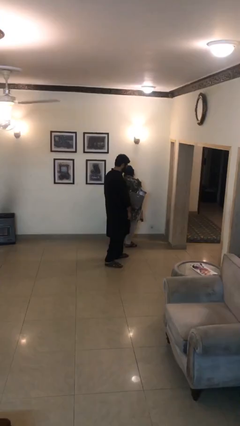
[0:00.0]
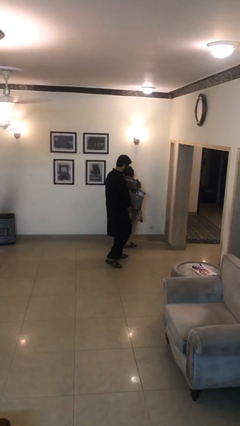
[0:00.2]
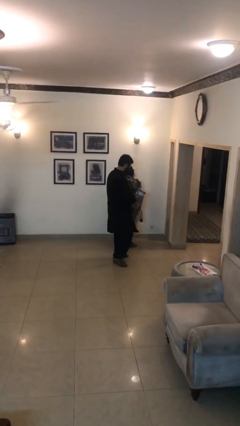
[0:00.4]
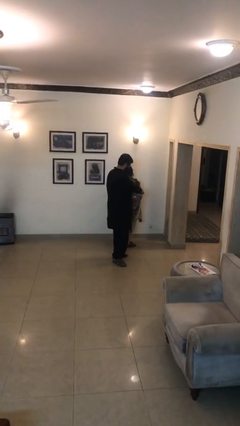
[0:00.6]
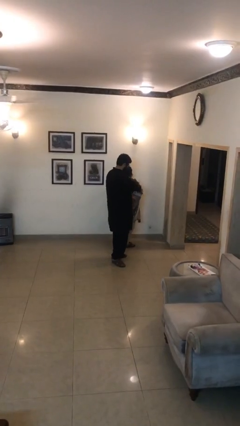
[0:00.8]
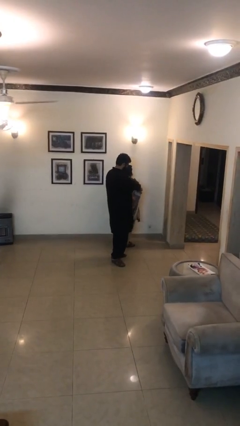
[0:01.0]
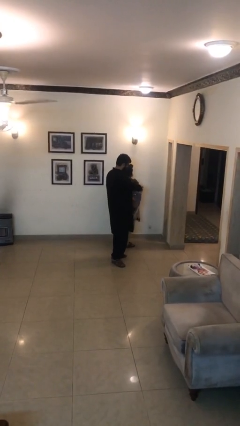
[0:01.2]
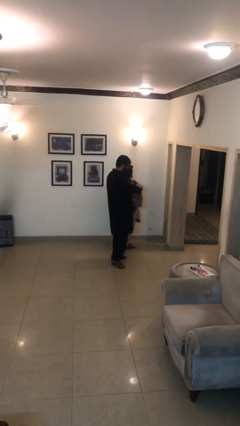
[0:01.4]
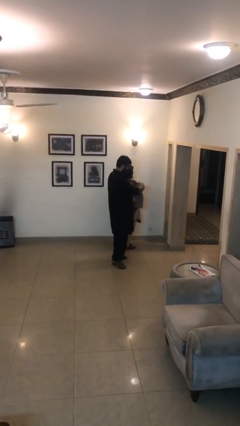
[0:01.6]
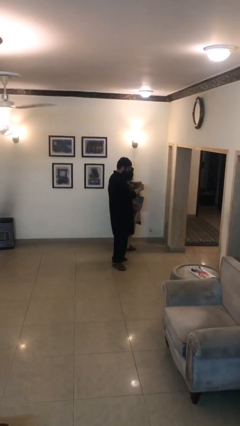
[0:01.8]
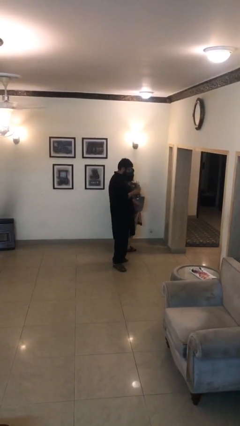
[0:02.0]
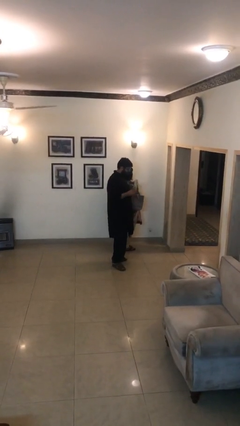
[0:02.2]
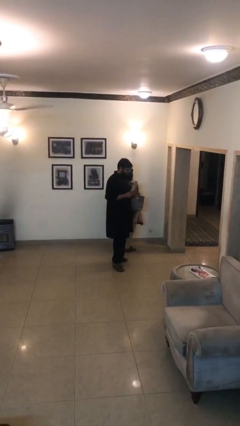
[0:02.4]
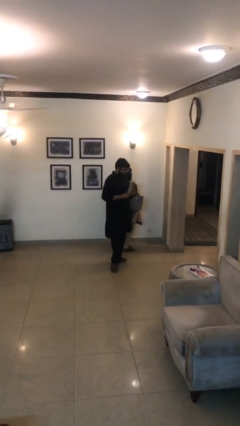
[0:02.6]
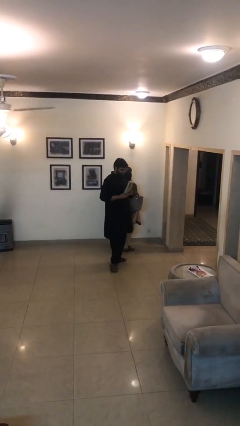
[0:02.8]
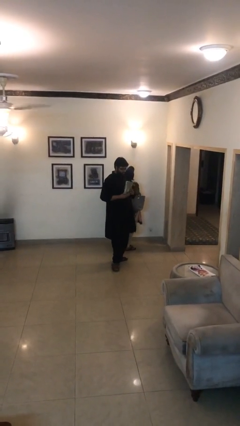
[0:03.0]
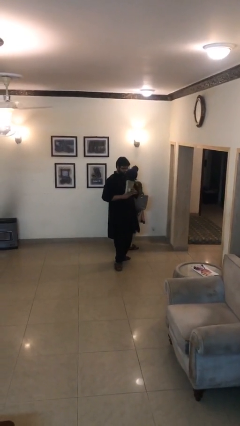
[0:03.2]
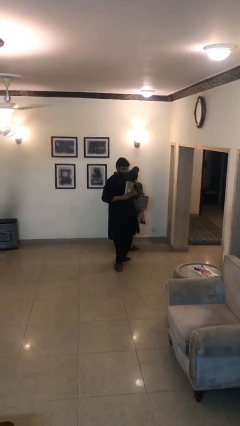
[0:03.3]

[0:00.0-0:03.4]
person steals object from person

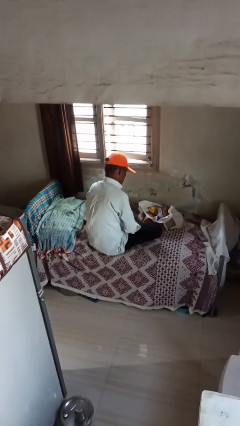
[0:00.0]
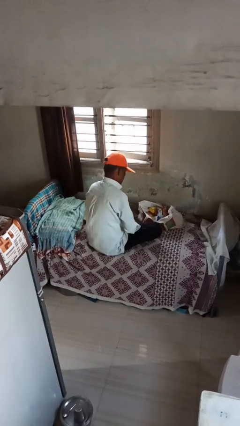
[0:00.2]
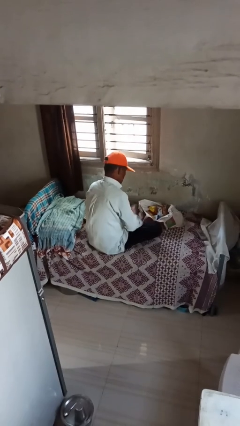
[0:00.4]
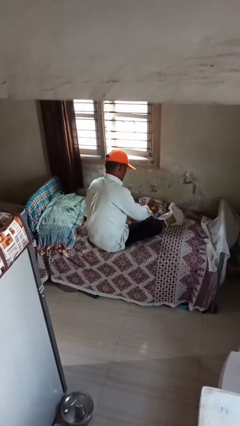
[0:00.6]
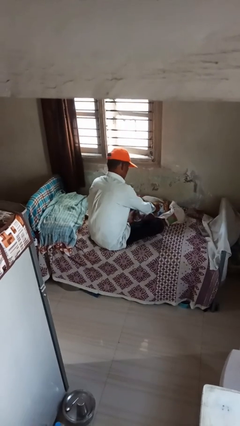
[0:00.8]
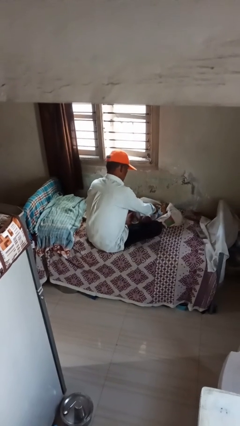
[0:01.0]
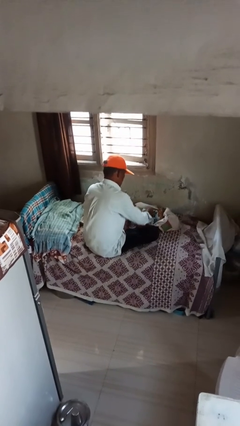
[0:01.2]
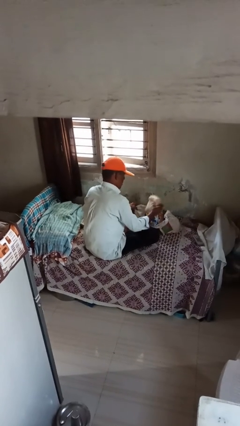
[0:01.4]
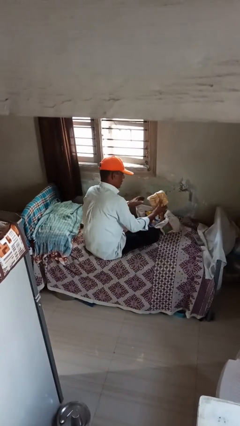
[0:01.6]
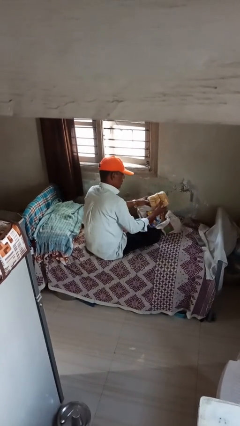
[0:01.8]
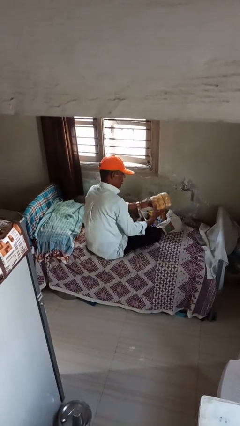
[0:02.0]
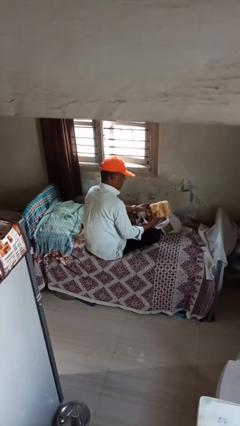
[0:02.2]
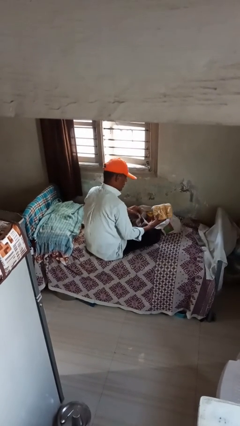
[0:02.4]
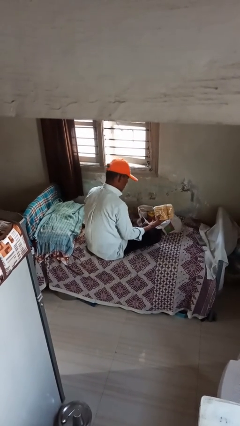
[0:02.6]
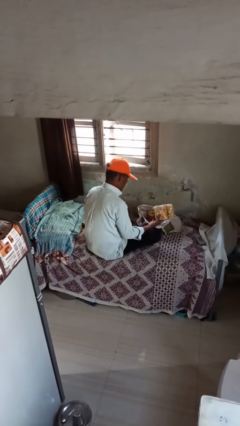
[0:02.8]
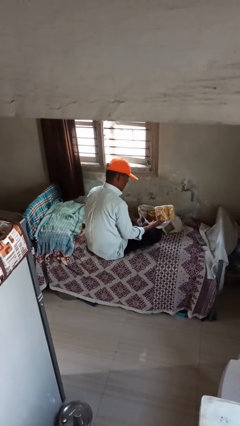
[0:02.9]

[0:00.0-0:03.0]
person takes object from bag

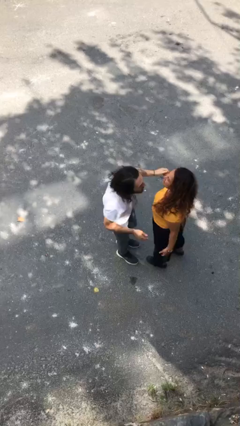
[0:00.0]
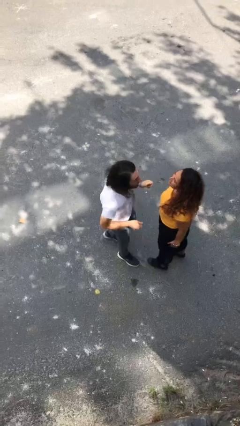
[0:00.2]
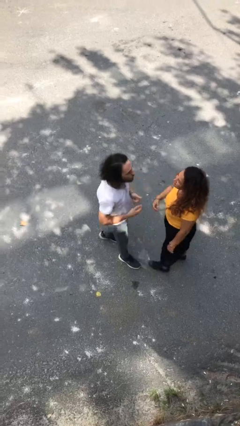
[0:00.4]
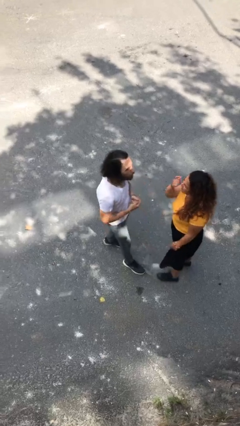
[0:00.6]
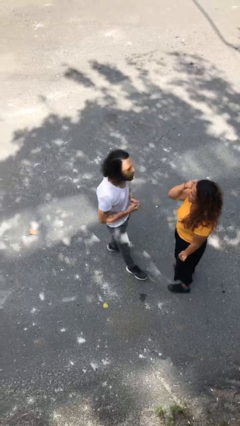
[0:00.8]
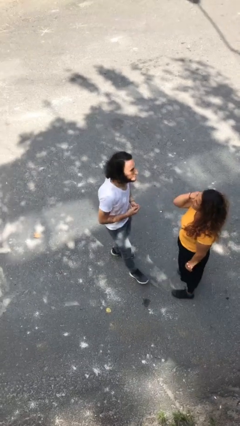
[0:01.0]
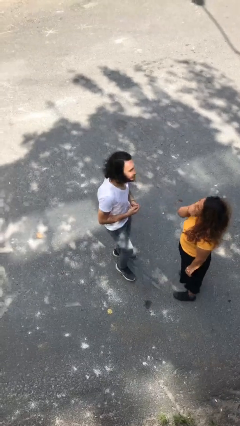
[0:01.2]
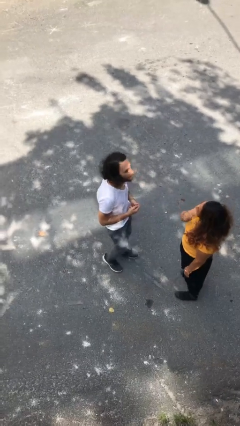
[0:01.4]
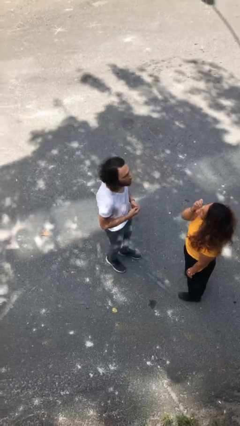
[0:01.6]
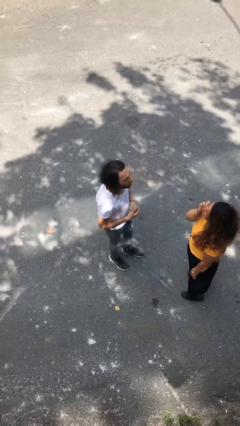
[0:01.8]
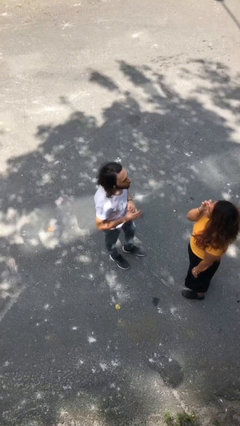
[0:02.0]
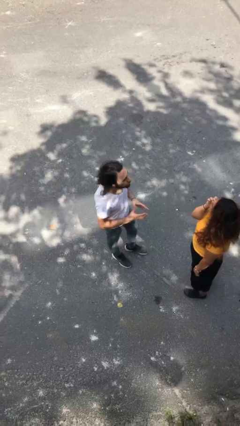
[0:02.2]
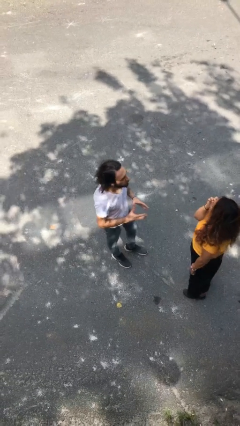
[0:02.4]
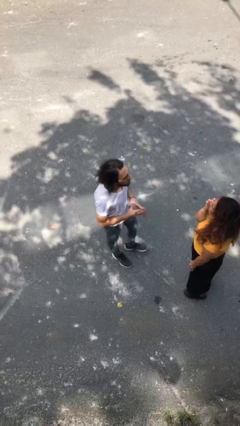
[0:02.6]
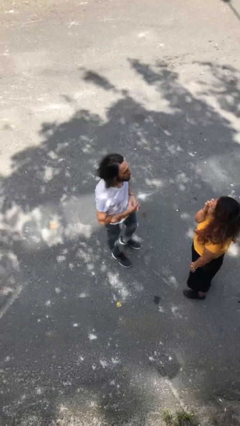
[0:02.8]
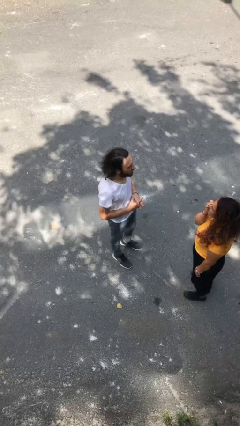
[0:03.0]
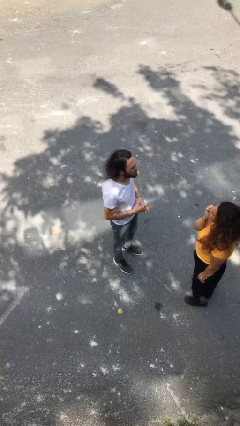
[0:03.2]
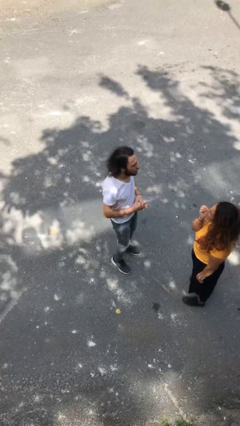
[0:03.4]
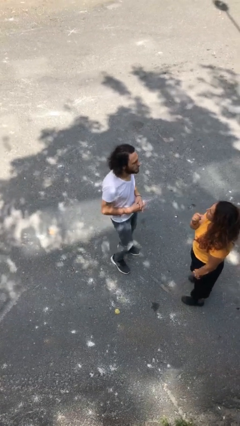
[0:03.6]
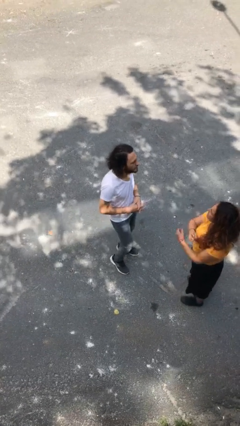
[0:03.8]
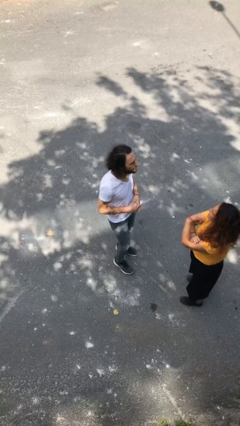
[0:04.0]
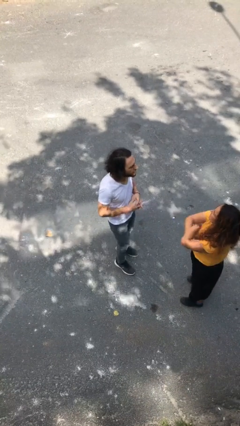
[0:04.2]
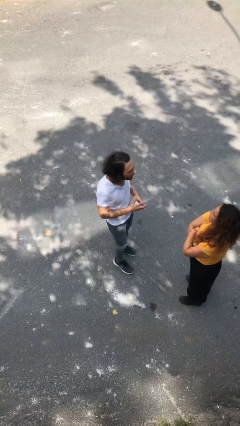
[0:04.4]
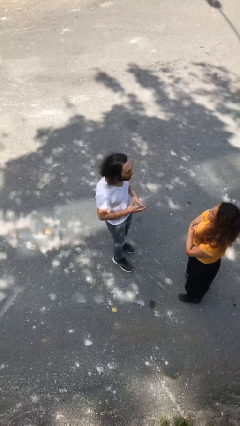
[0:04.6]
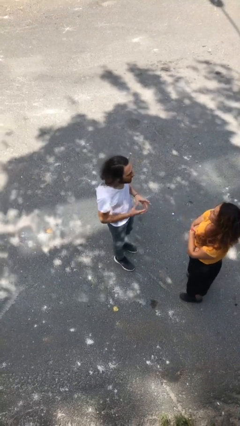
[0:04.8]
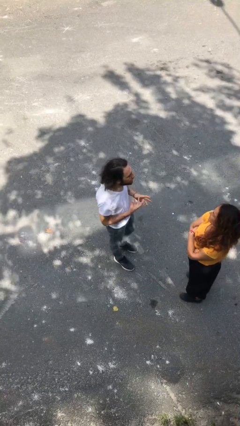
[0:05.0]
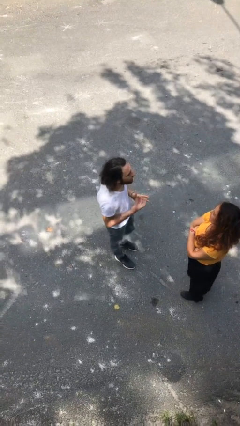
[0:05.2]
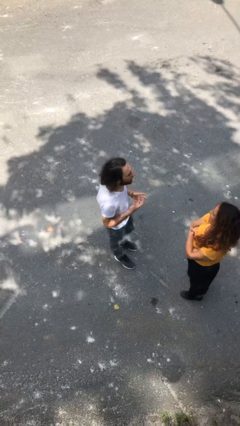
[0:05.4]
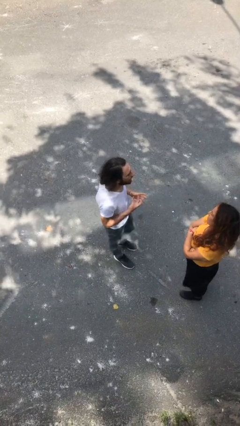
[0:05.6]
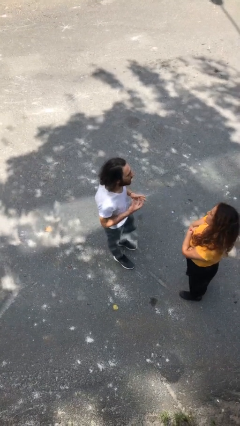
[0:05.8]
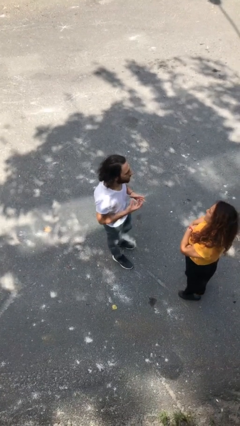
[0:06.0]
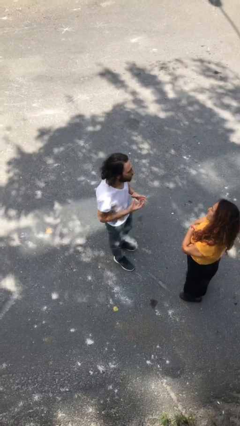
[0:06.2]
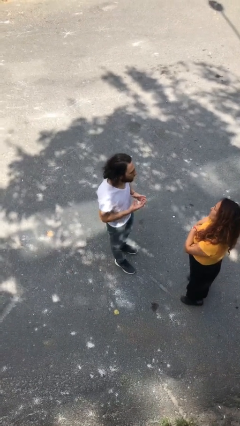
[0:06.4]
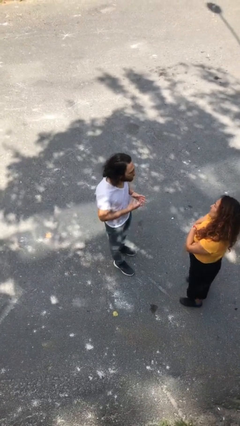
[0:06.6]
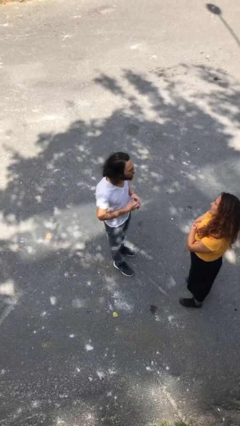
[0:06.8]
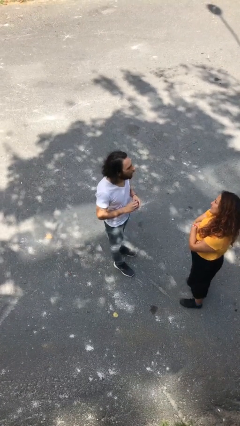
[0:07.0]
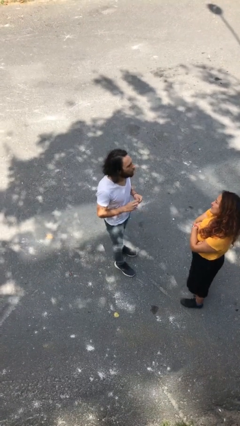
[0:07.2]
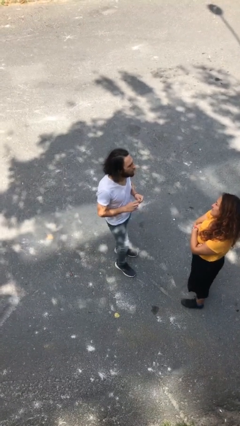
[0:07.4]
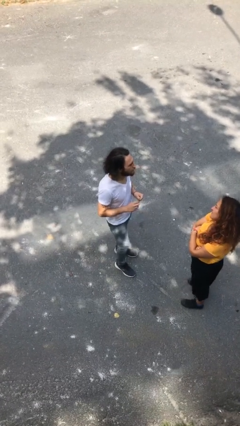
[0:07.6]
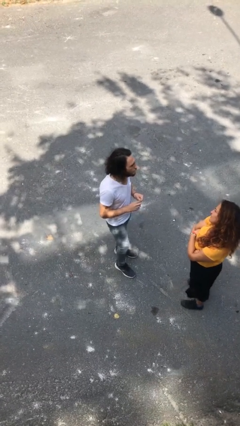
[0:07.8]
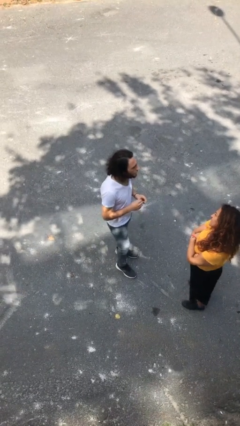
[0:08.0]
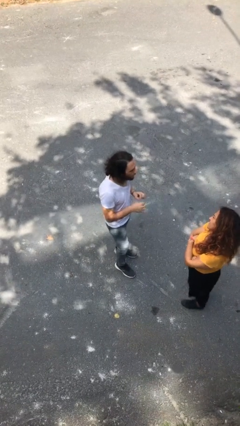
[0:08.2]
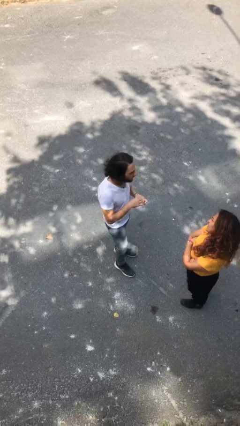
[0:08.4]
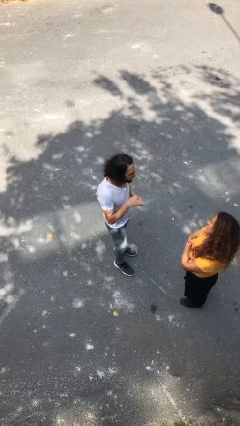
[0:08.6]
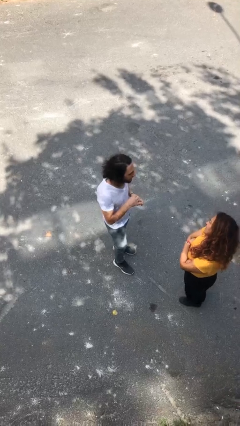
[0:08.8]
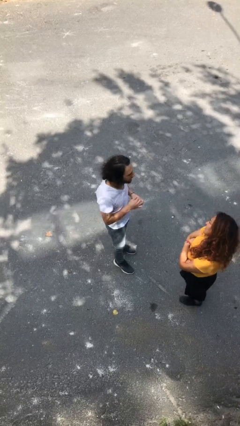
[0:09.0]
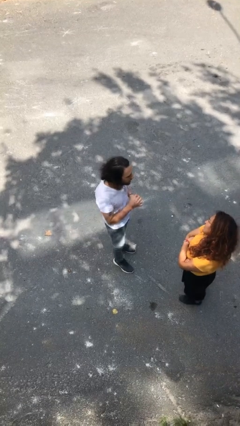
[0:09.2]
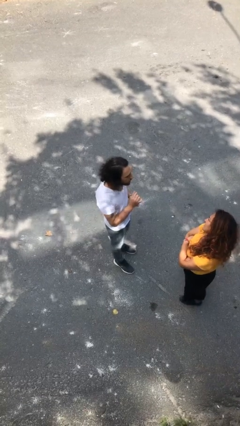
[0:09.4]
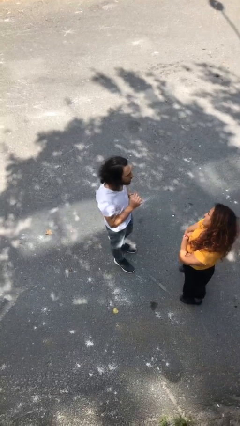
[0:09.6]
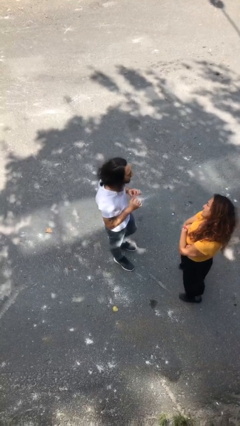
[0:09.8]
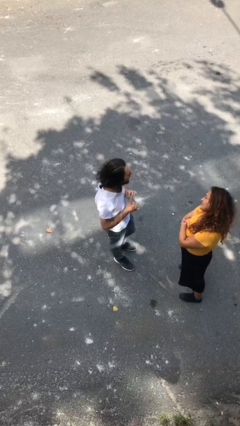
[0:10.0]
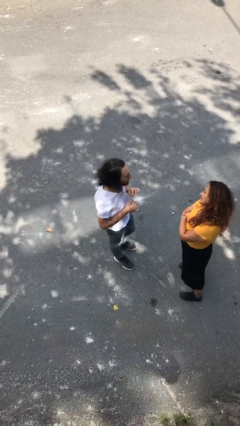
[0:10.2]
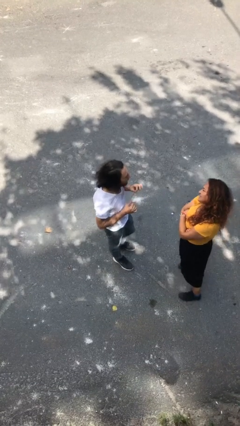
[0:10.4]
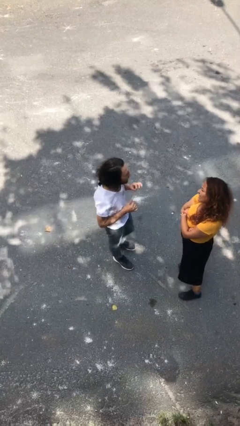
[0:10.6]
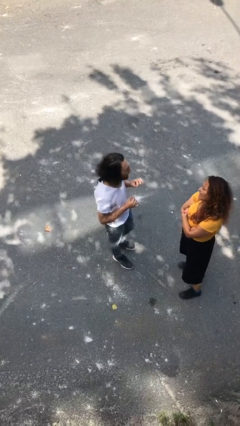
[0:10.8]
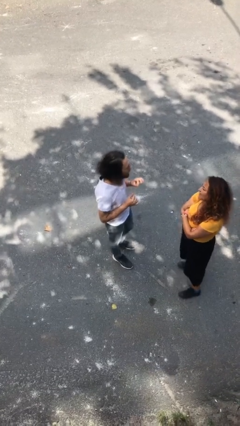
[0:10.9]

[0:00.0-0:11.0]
person talks to person

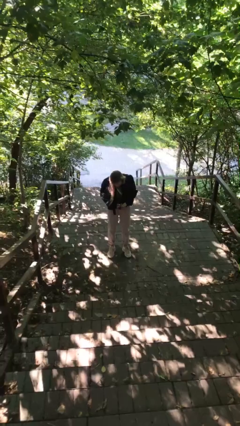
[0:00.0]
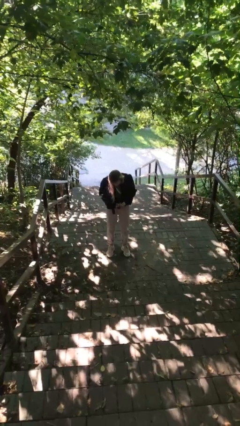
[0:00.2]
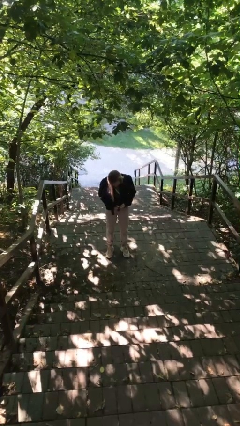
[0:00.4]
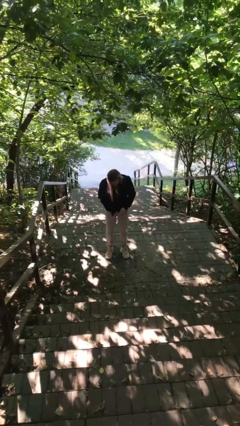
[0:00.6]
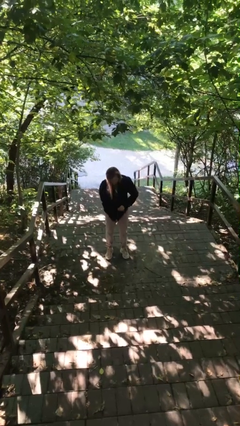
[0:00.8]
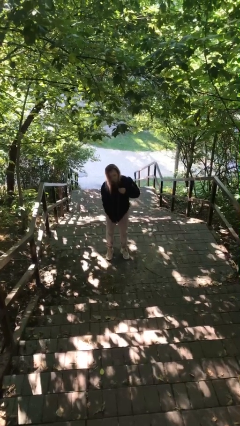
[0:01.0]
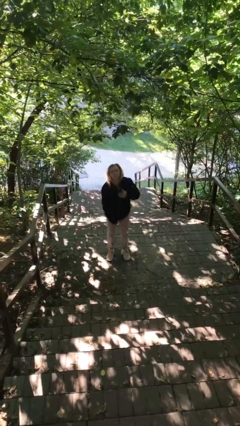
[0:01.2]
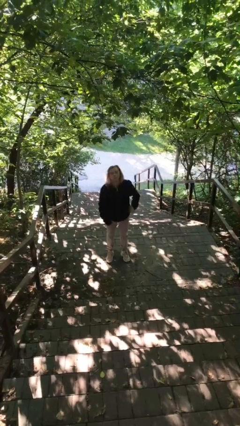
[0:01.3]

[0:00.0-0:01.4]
person zips up jacket
